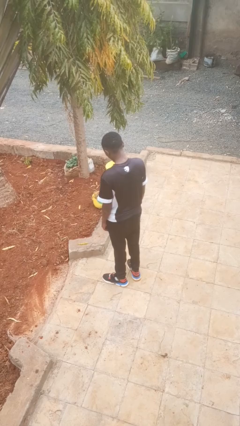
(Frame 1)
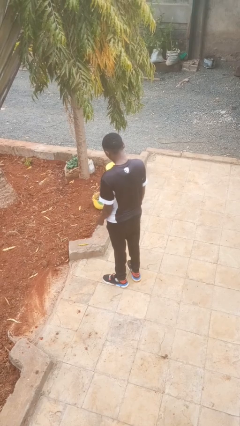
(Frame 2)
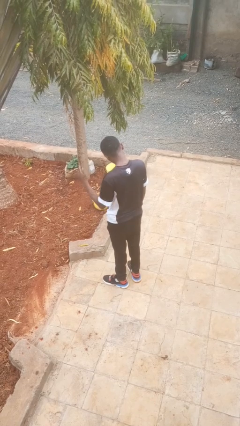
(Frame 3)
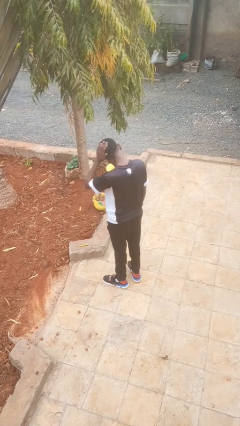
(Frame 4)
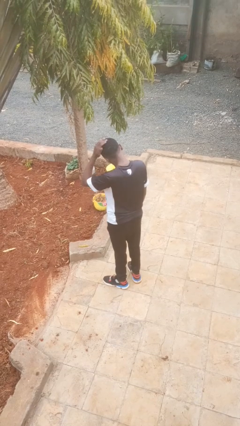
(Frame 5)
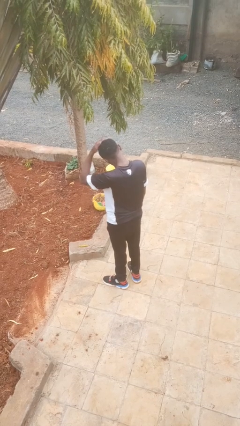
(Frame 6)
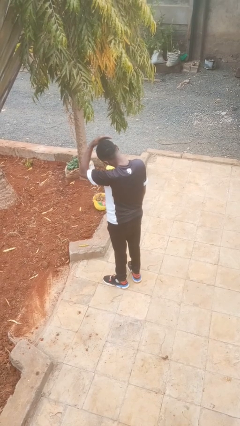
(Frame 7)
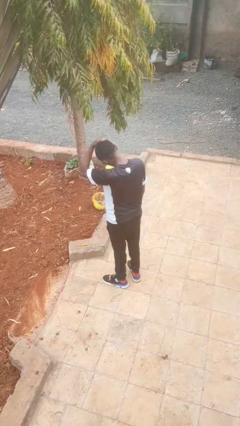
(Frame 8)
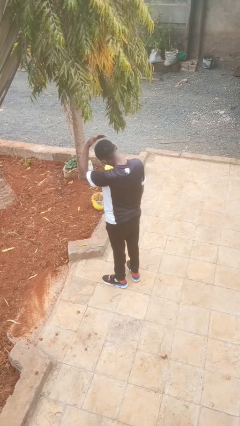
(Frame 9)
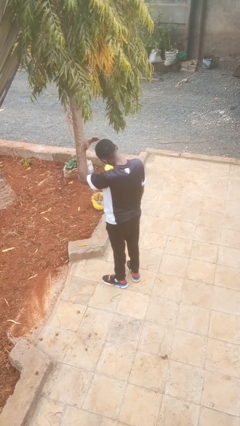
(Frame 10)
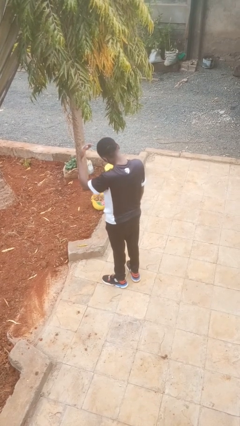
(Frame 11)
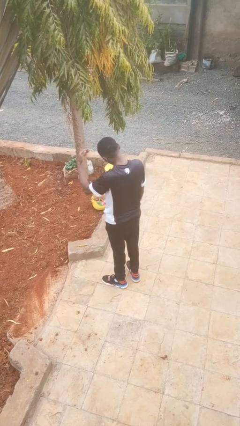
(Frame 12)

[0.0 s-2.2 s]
person pats head

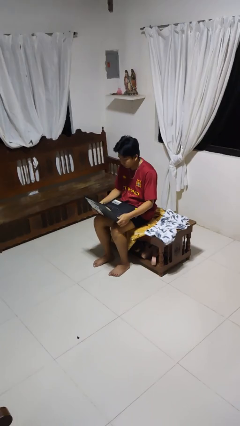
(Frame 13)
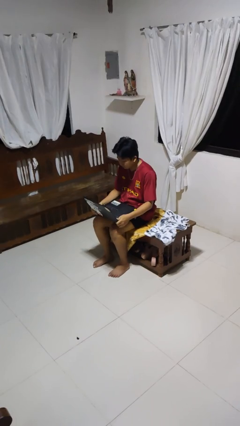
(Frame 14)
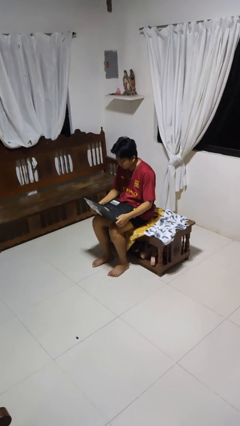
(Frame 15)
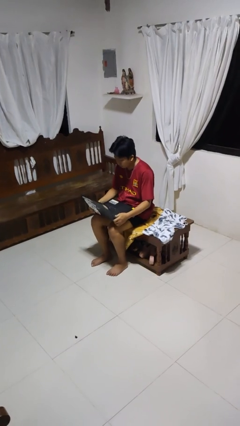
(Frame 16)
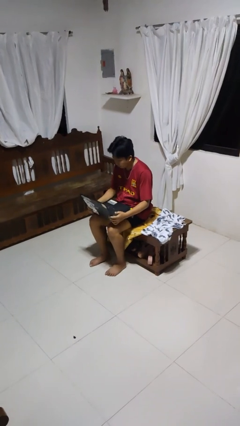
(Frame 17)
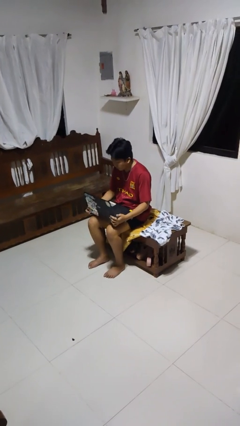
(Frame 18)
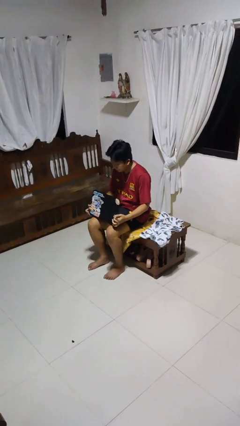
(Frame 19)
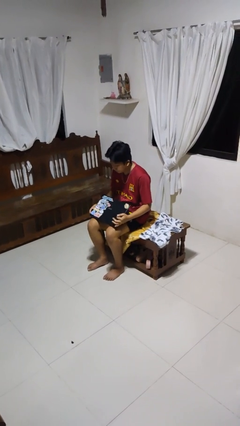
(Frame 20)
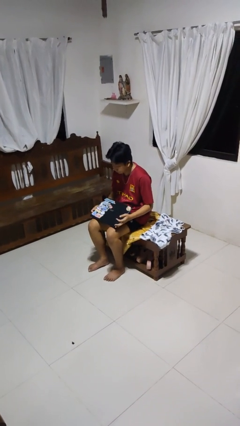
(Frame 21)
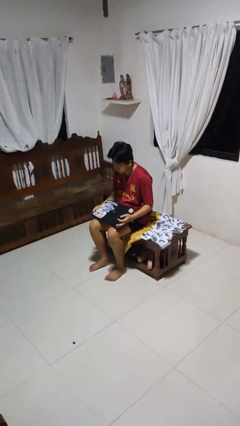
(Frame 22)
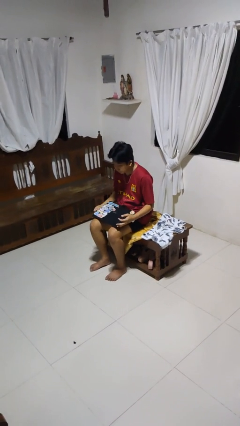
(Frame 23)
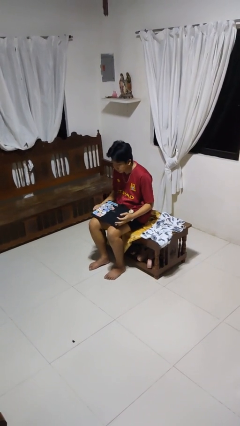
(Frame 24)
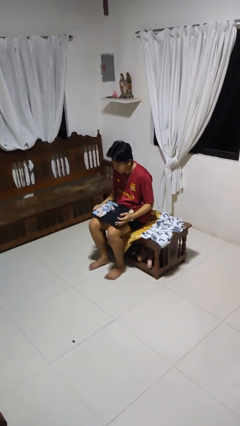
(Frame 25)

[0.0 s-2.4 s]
person closes laptop

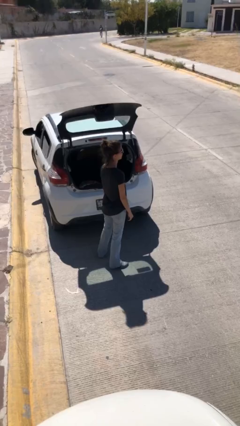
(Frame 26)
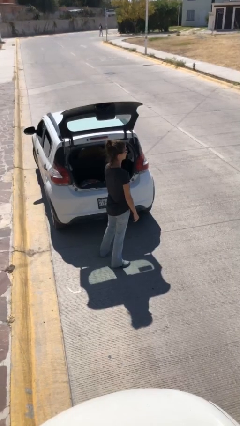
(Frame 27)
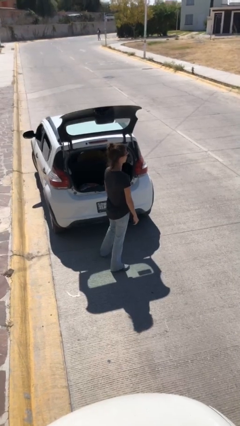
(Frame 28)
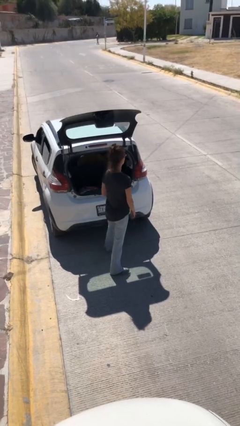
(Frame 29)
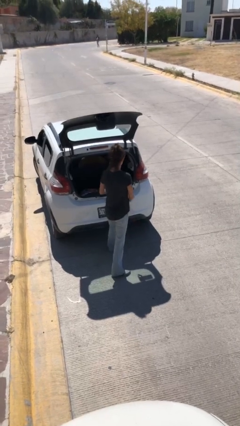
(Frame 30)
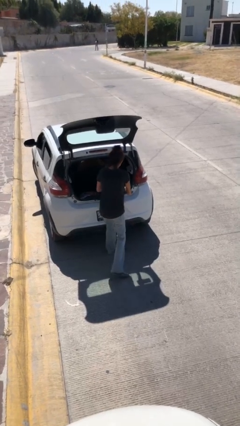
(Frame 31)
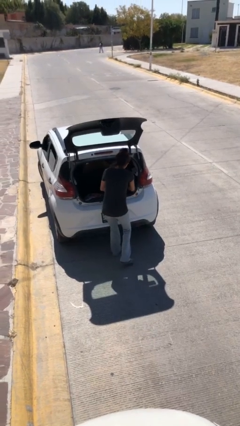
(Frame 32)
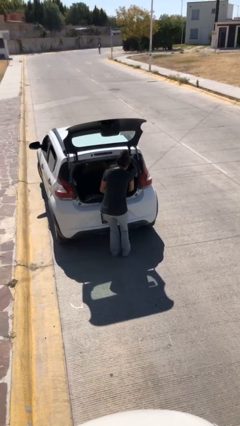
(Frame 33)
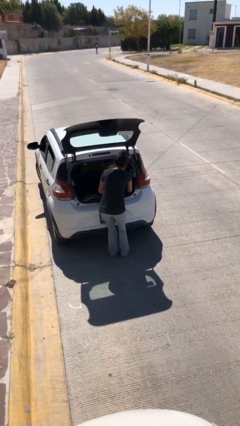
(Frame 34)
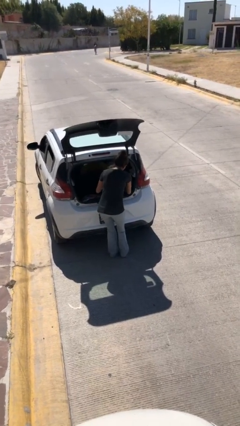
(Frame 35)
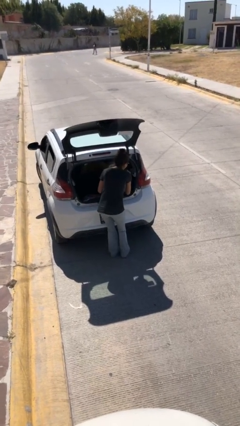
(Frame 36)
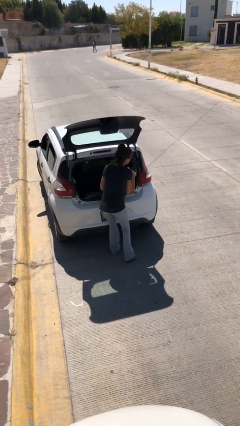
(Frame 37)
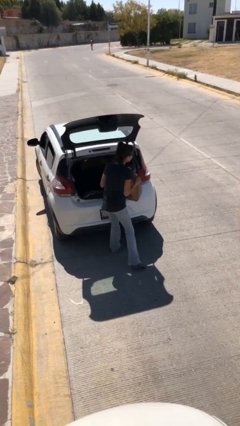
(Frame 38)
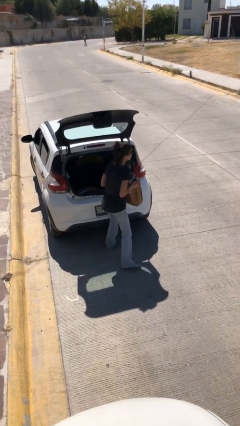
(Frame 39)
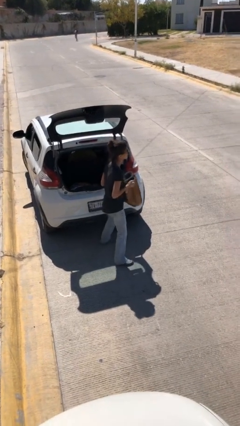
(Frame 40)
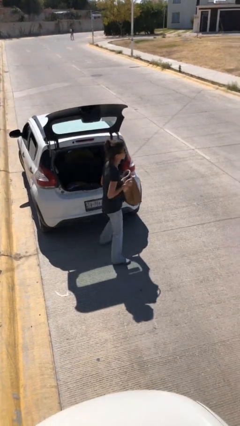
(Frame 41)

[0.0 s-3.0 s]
person unloads car

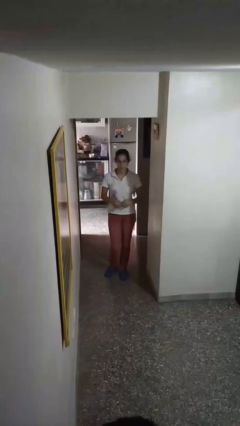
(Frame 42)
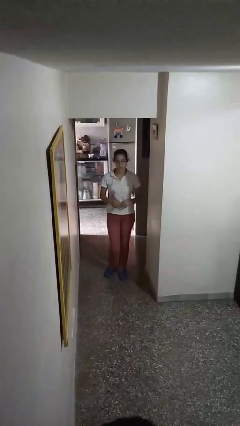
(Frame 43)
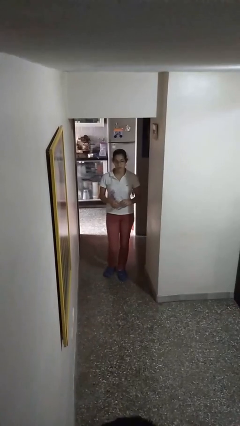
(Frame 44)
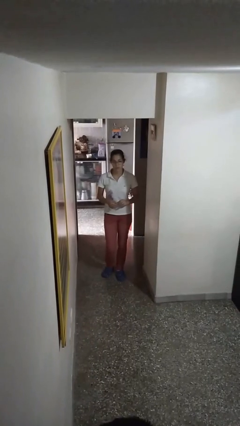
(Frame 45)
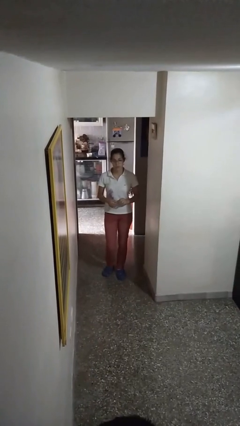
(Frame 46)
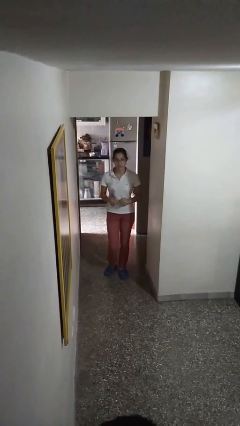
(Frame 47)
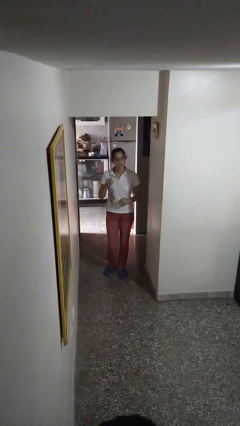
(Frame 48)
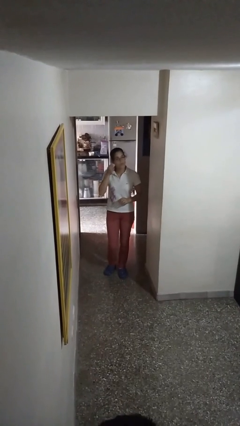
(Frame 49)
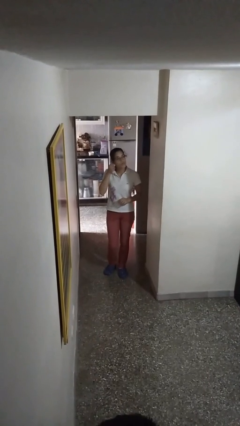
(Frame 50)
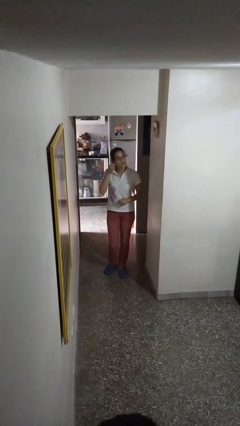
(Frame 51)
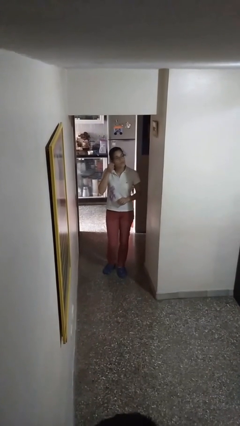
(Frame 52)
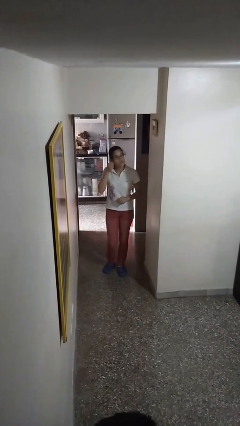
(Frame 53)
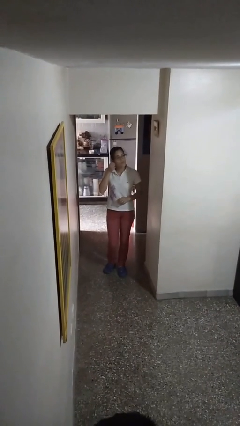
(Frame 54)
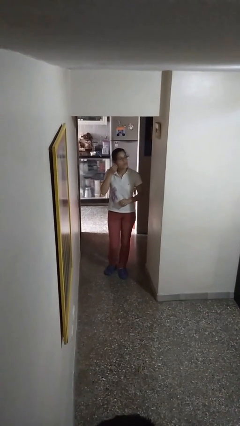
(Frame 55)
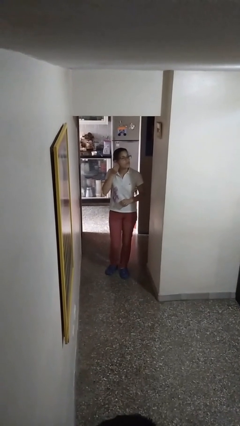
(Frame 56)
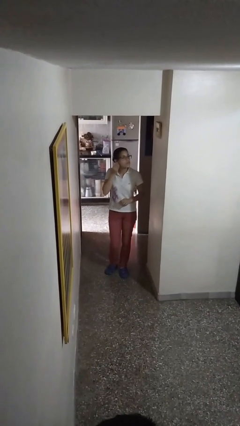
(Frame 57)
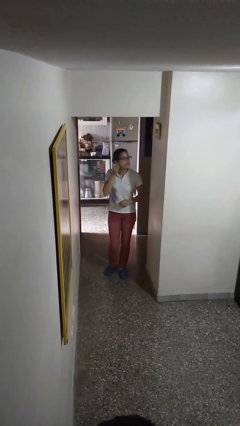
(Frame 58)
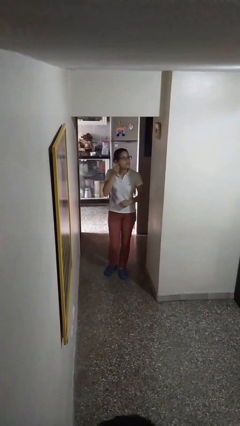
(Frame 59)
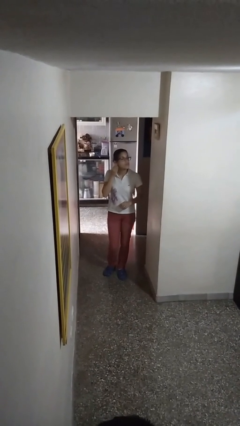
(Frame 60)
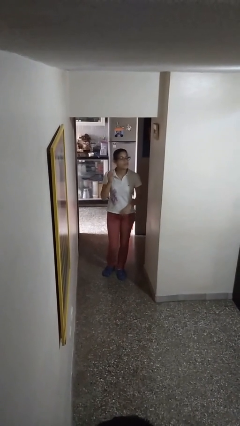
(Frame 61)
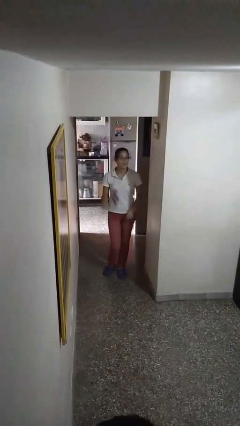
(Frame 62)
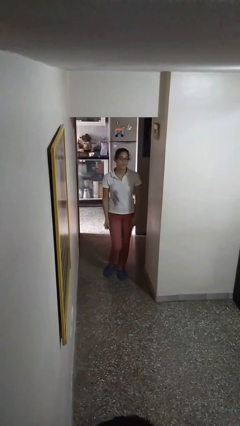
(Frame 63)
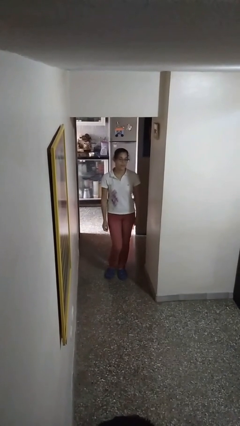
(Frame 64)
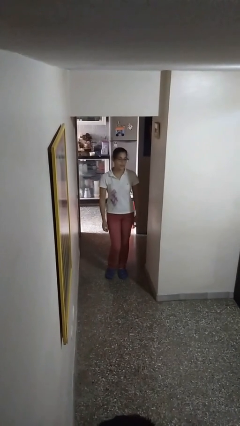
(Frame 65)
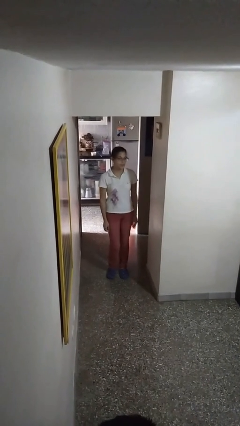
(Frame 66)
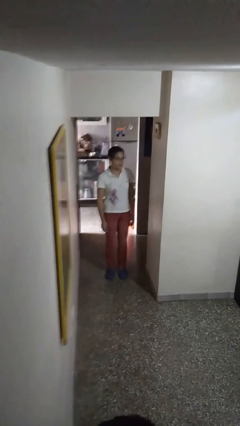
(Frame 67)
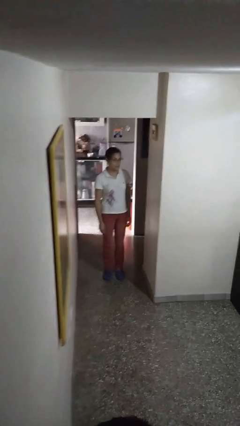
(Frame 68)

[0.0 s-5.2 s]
person puts on earrings

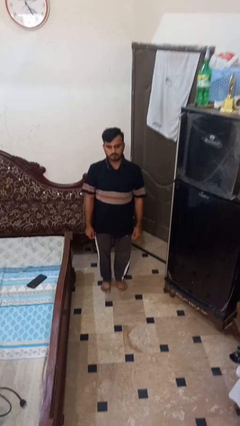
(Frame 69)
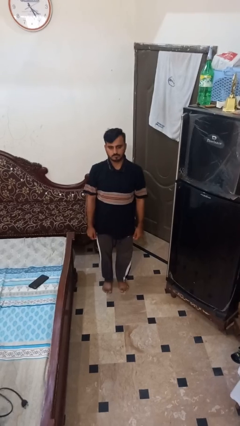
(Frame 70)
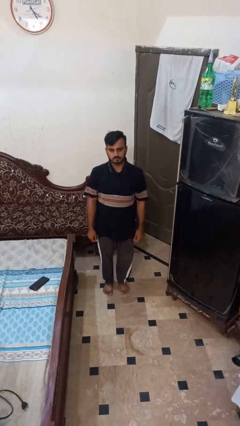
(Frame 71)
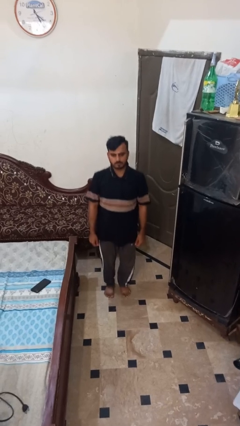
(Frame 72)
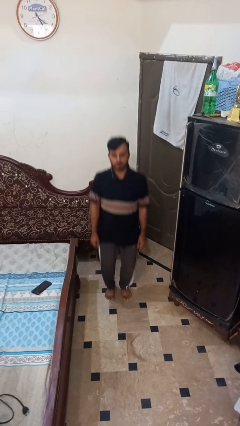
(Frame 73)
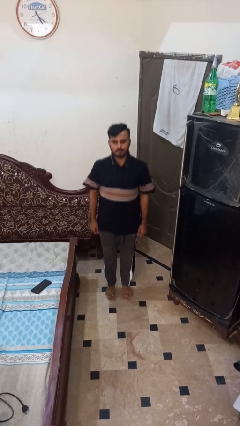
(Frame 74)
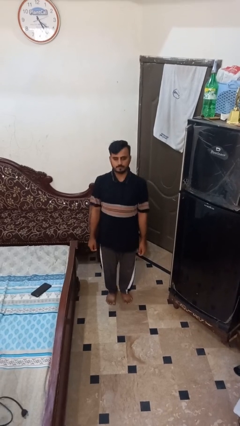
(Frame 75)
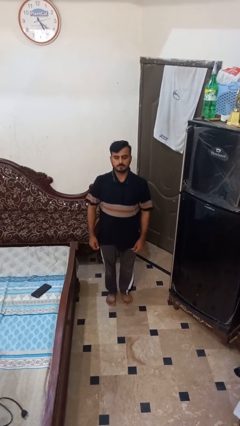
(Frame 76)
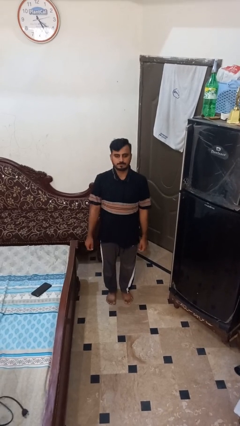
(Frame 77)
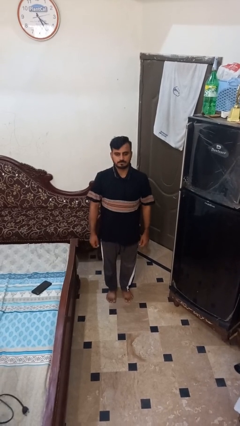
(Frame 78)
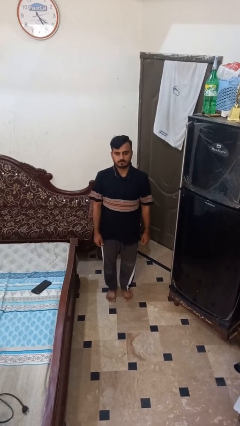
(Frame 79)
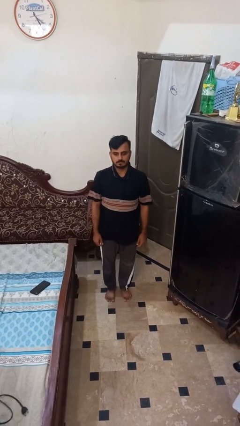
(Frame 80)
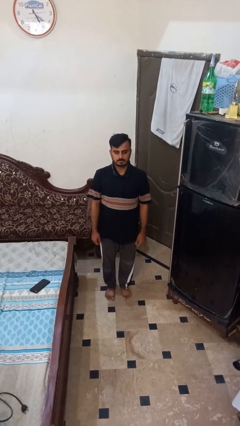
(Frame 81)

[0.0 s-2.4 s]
person jumps

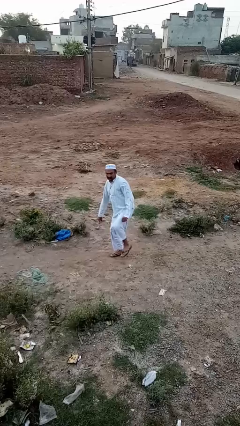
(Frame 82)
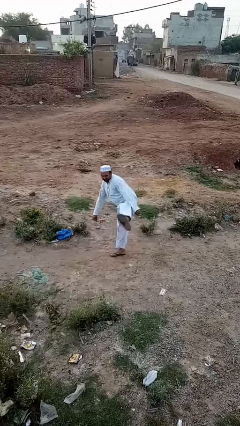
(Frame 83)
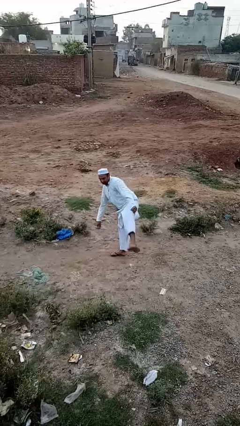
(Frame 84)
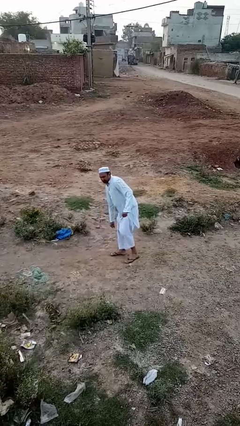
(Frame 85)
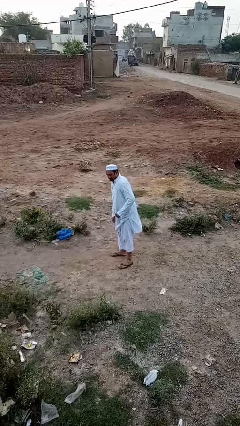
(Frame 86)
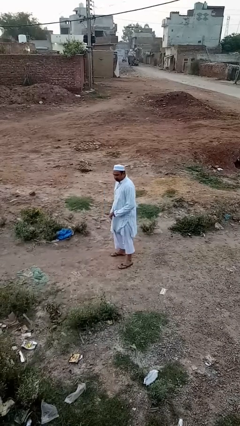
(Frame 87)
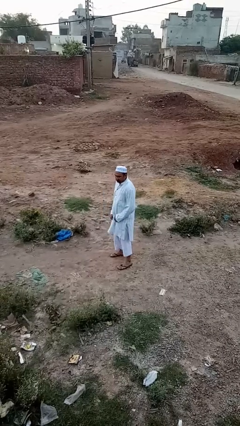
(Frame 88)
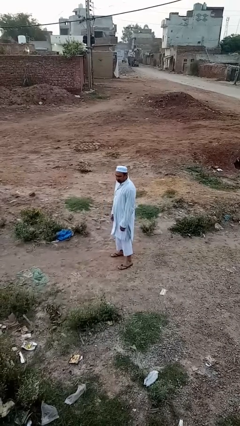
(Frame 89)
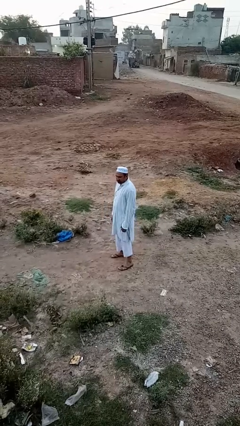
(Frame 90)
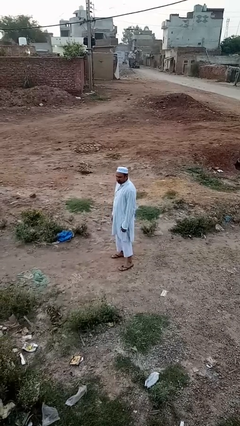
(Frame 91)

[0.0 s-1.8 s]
person karate kicks

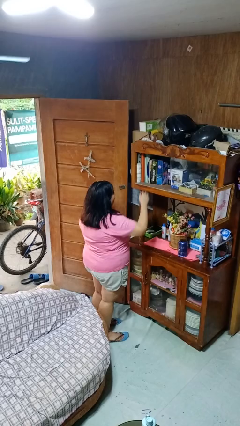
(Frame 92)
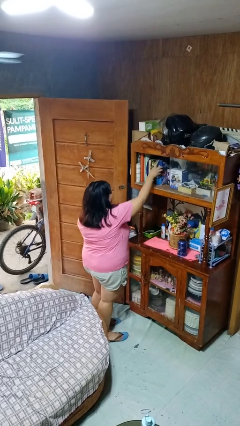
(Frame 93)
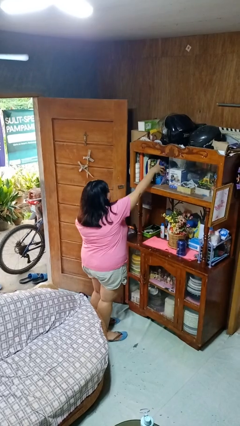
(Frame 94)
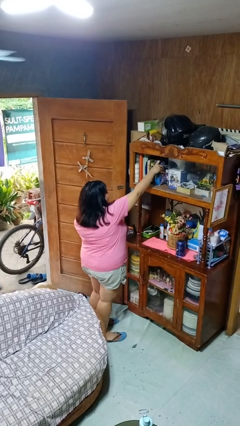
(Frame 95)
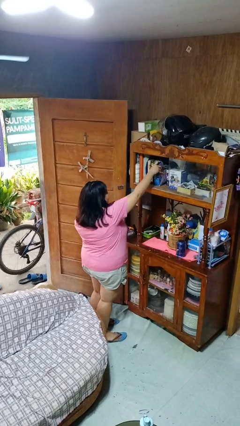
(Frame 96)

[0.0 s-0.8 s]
person picks up object from shelf
